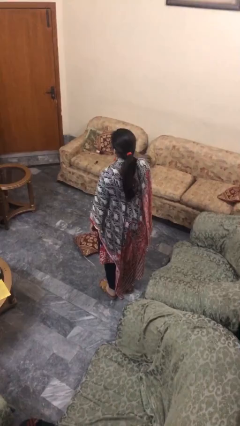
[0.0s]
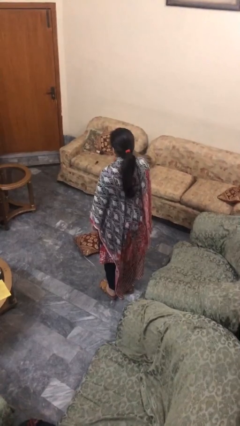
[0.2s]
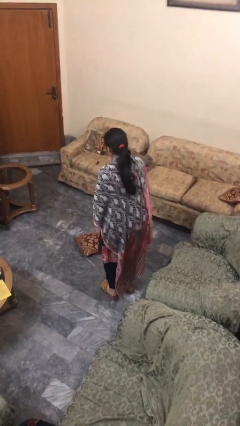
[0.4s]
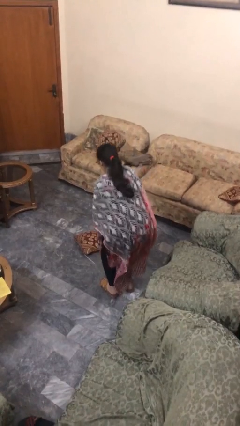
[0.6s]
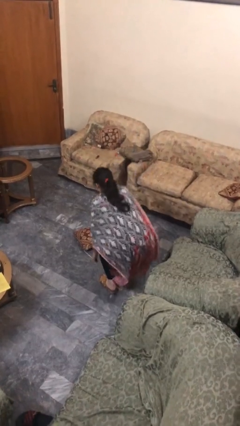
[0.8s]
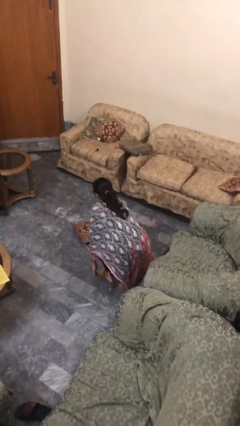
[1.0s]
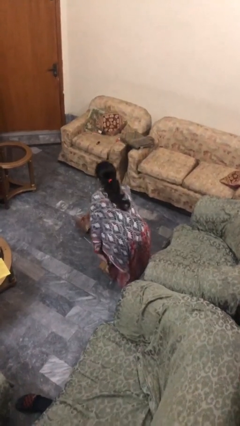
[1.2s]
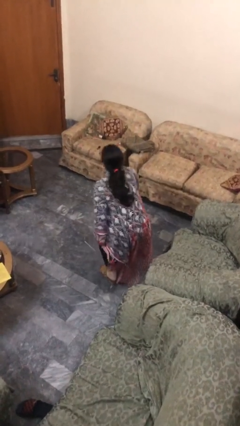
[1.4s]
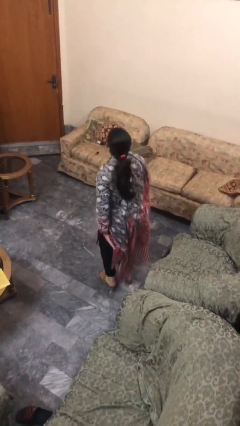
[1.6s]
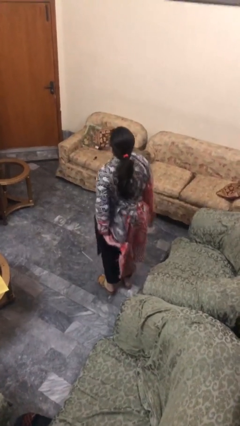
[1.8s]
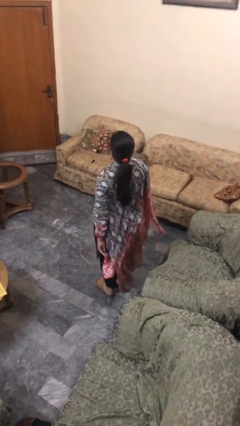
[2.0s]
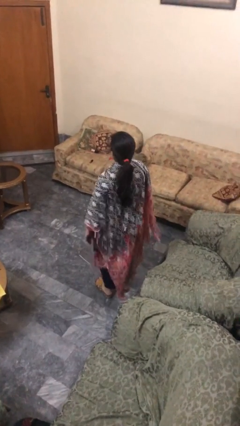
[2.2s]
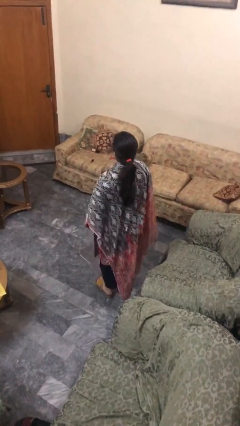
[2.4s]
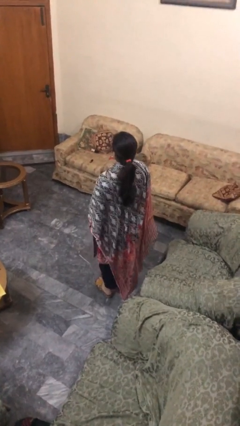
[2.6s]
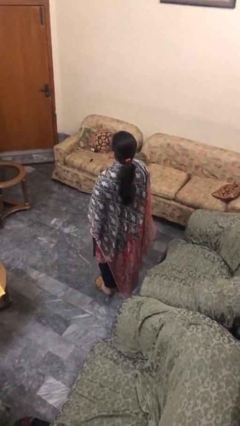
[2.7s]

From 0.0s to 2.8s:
person picks up object from floor

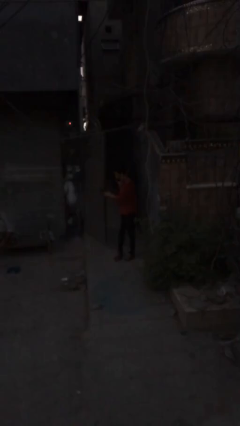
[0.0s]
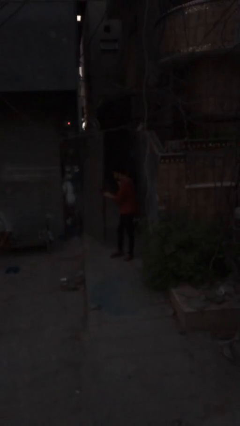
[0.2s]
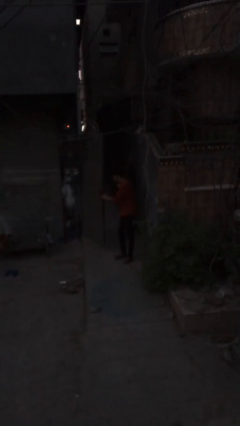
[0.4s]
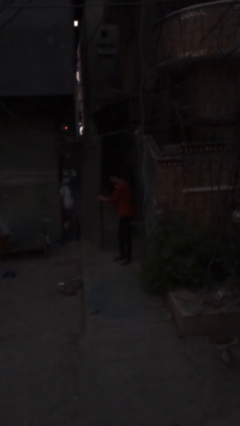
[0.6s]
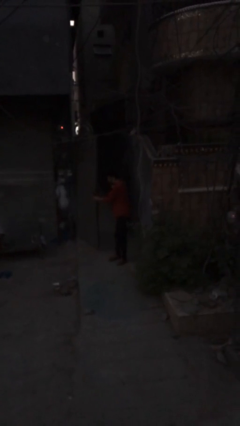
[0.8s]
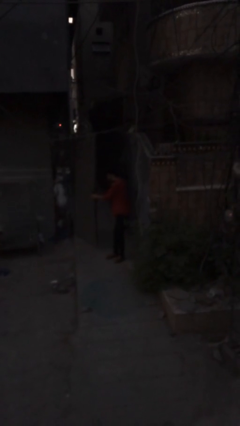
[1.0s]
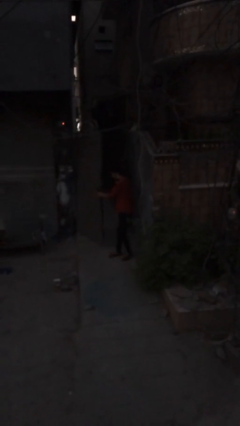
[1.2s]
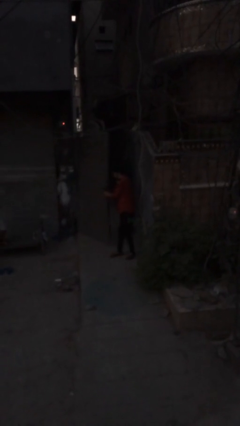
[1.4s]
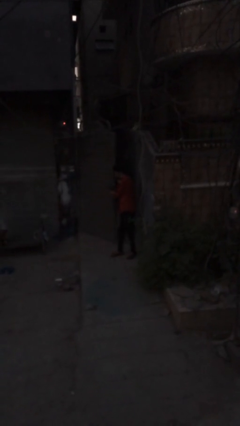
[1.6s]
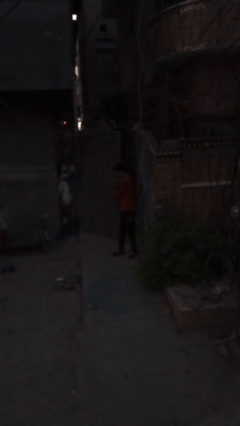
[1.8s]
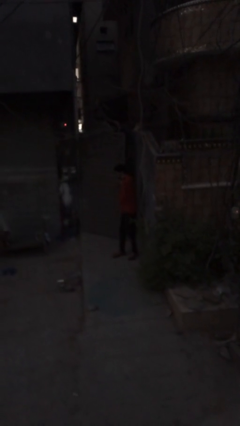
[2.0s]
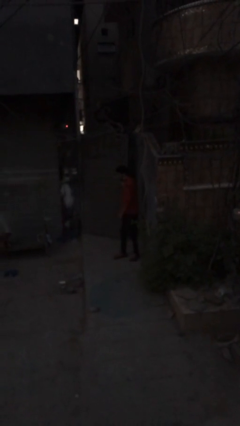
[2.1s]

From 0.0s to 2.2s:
person closes facility door

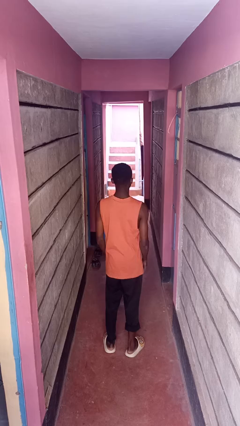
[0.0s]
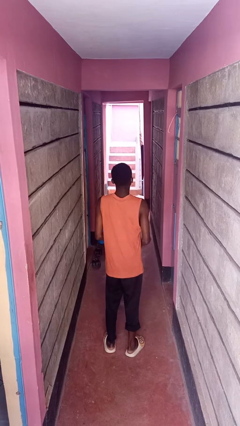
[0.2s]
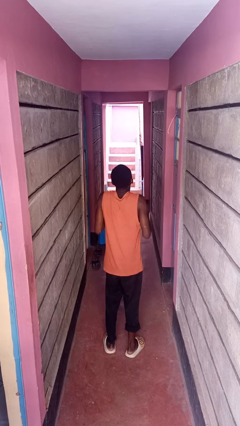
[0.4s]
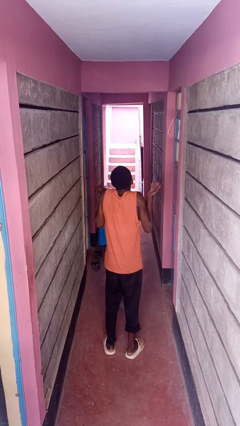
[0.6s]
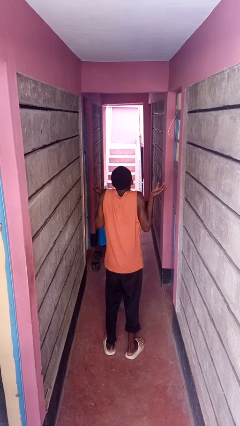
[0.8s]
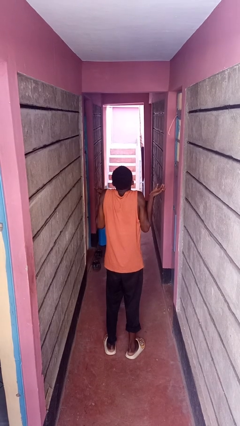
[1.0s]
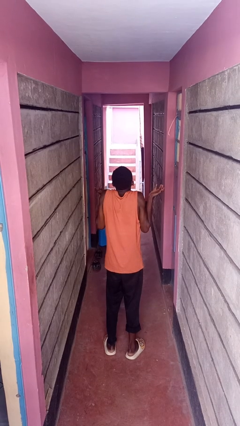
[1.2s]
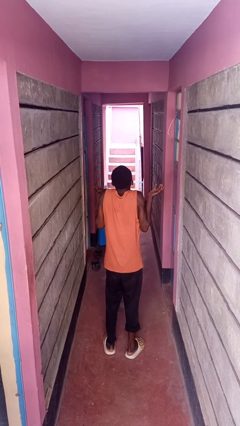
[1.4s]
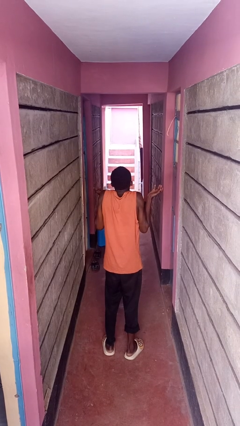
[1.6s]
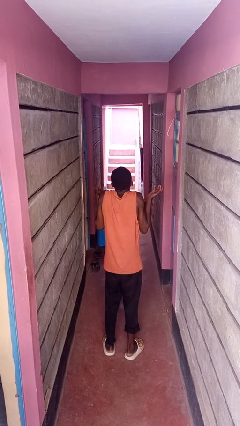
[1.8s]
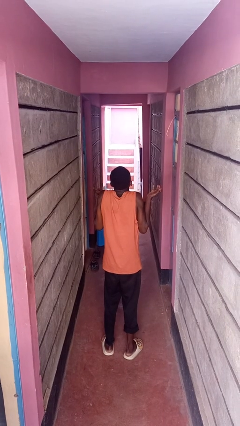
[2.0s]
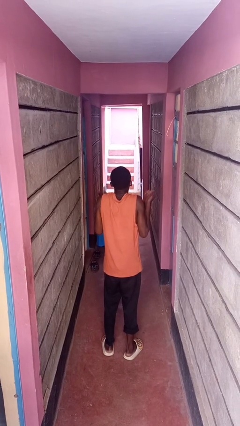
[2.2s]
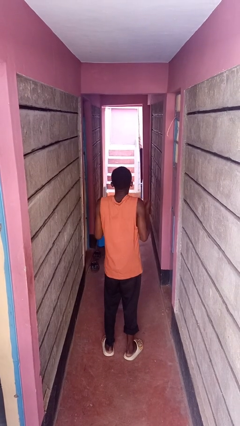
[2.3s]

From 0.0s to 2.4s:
person shrugs

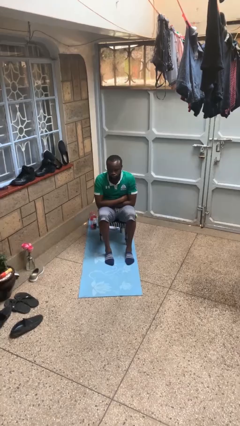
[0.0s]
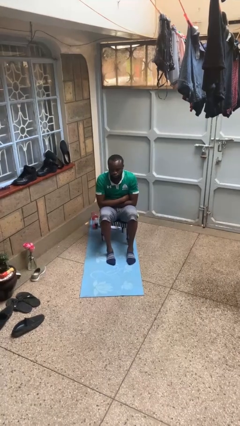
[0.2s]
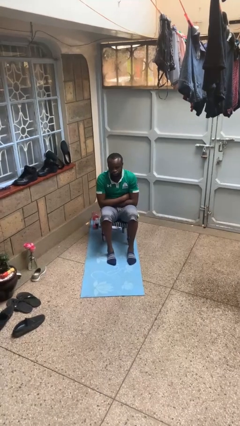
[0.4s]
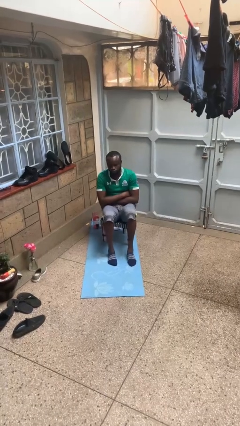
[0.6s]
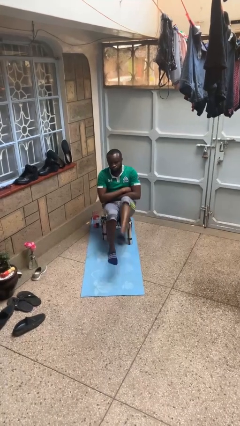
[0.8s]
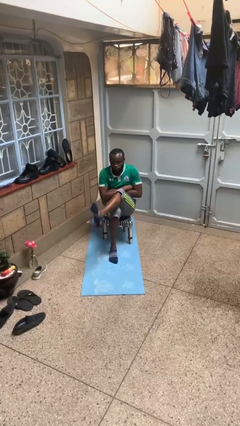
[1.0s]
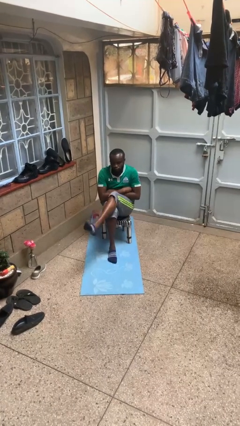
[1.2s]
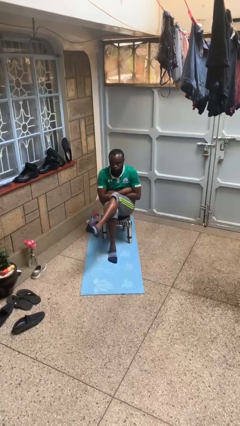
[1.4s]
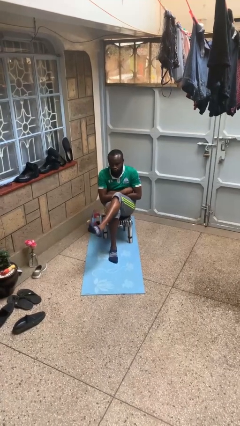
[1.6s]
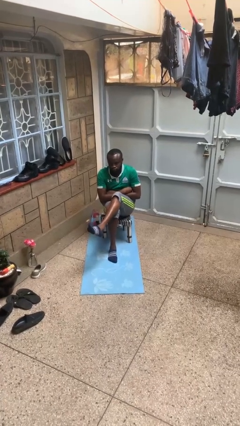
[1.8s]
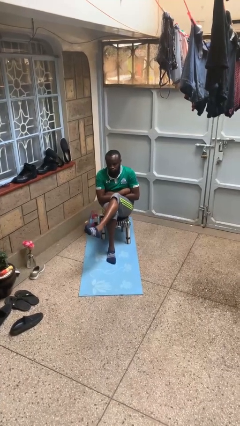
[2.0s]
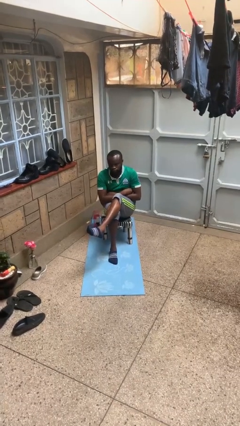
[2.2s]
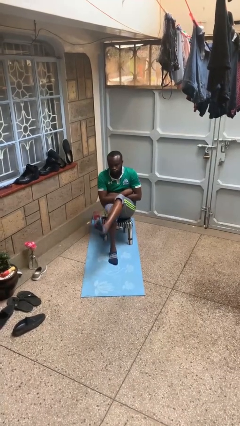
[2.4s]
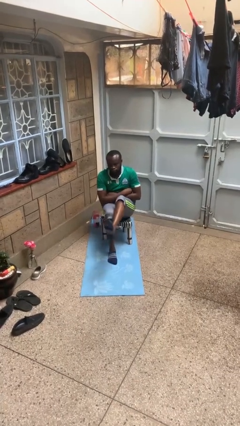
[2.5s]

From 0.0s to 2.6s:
person crosses legs

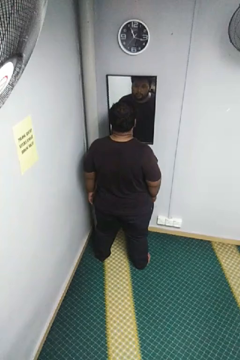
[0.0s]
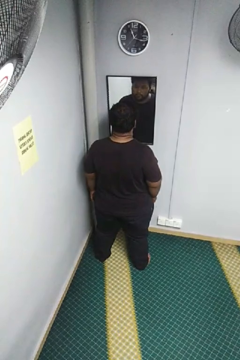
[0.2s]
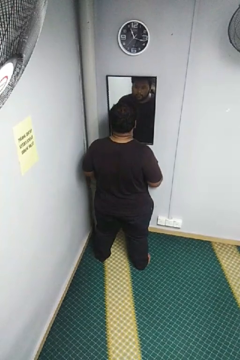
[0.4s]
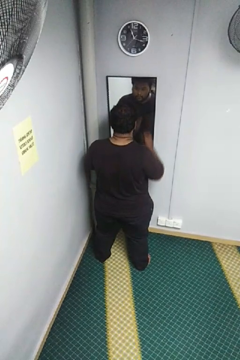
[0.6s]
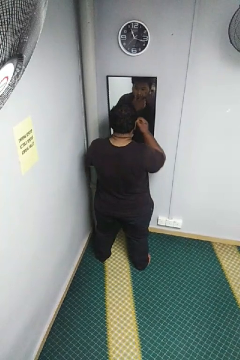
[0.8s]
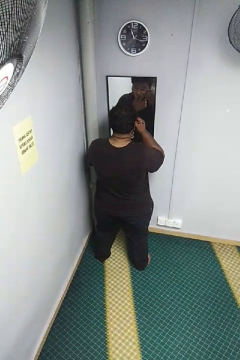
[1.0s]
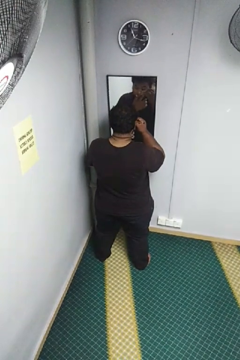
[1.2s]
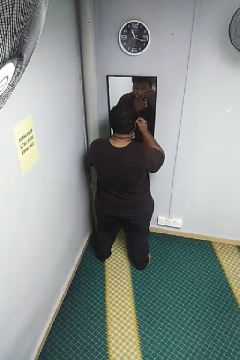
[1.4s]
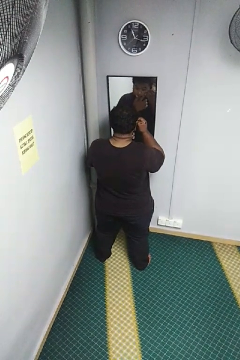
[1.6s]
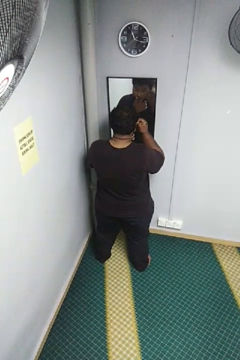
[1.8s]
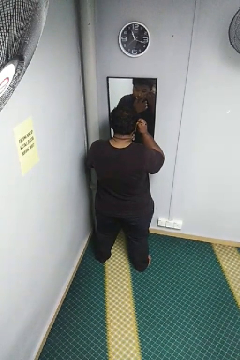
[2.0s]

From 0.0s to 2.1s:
person applies eye makeup

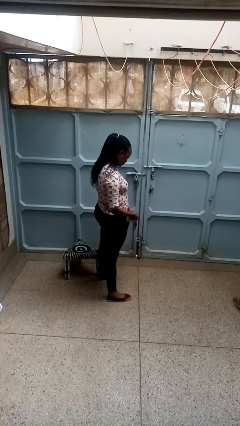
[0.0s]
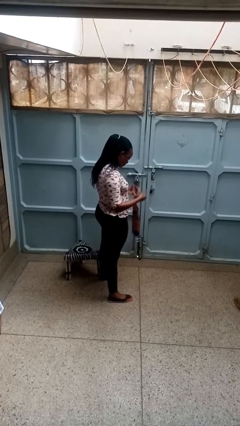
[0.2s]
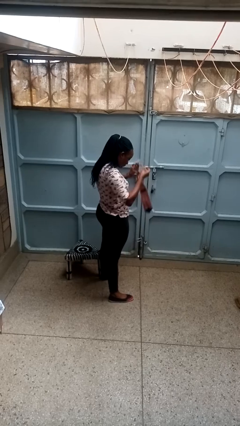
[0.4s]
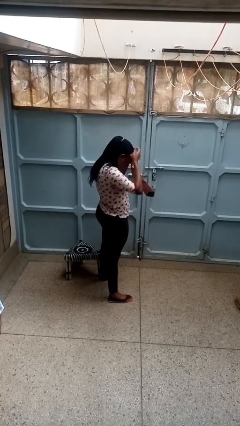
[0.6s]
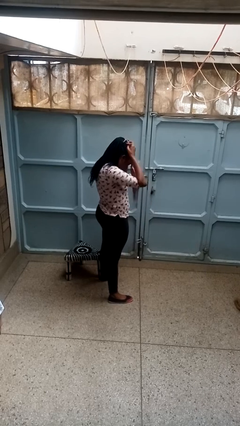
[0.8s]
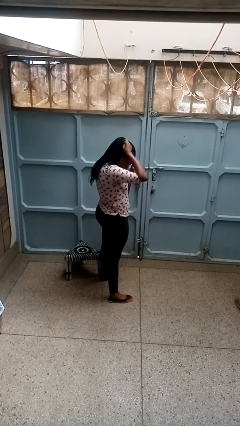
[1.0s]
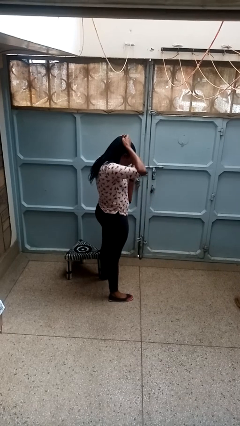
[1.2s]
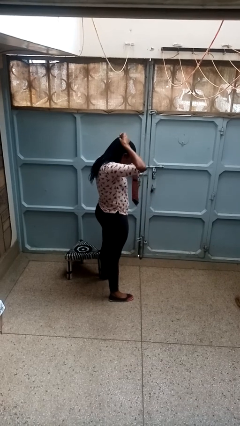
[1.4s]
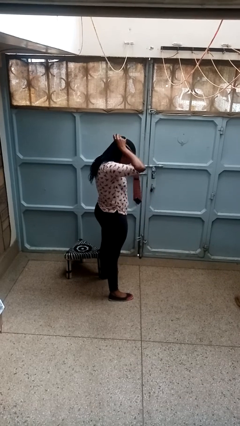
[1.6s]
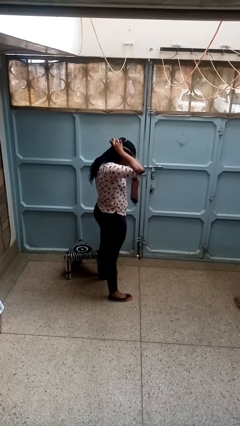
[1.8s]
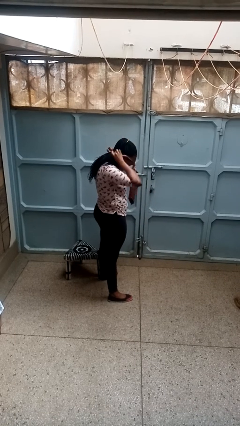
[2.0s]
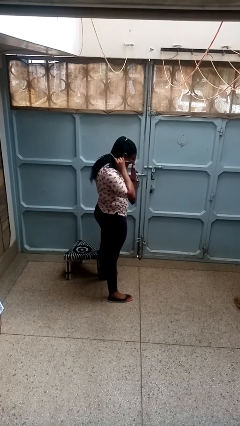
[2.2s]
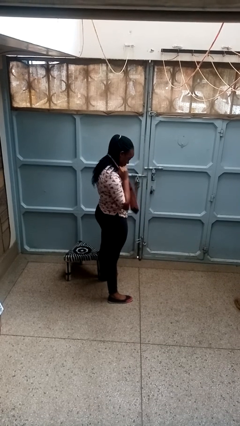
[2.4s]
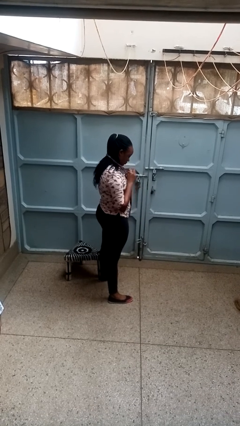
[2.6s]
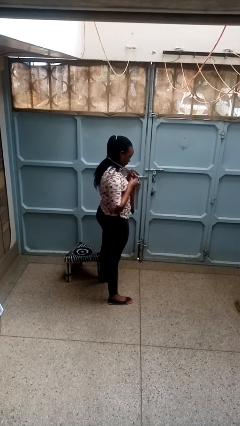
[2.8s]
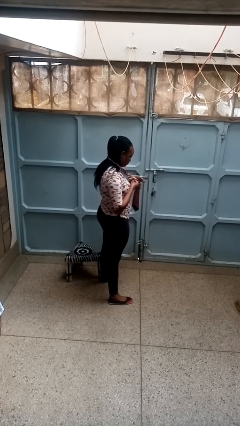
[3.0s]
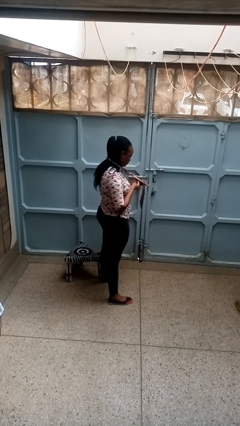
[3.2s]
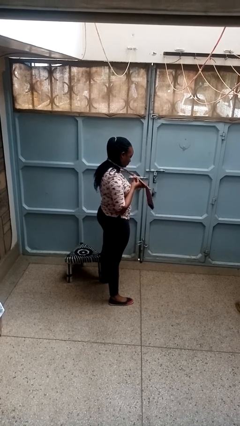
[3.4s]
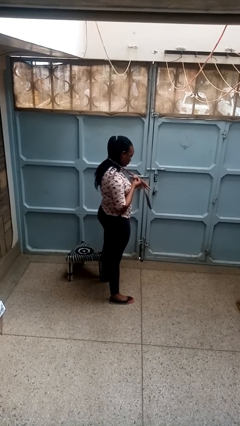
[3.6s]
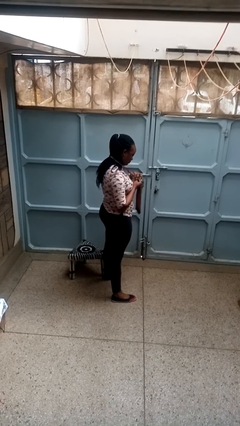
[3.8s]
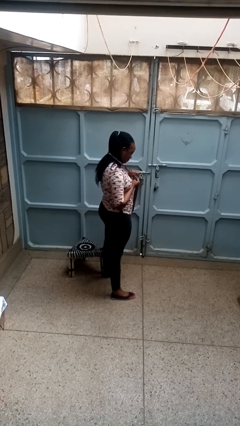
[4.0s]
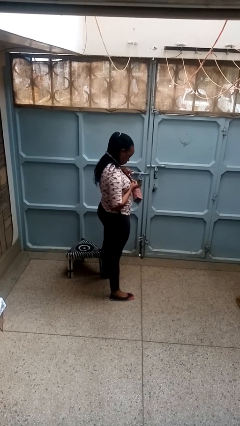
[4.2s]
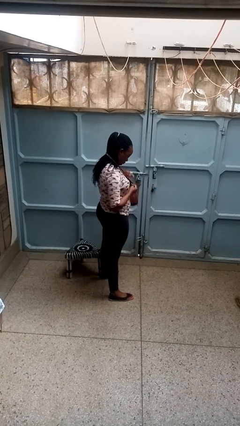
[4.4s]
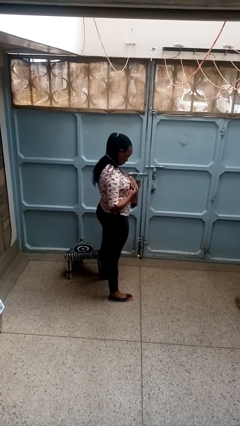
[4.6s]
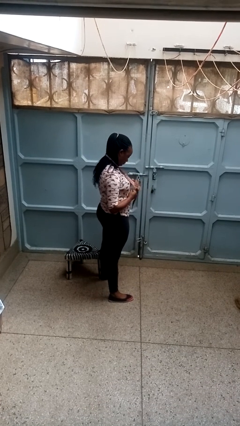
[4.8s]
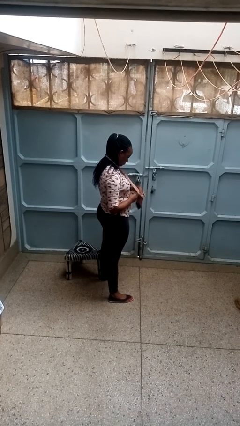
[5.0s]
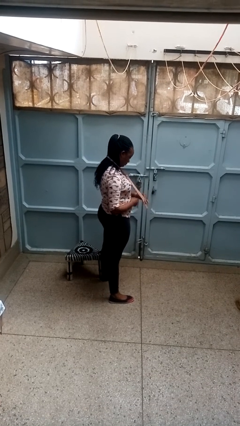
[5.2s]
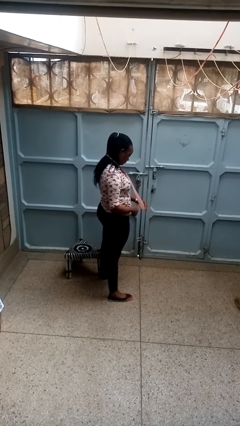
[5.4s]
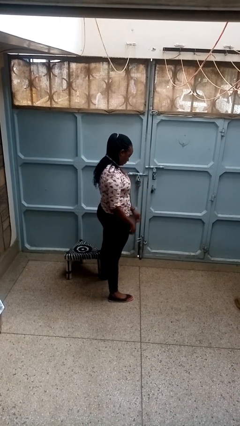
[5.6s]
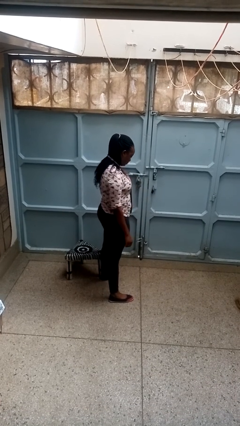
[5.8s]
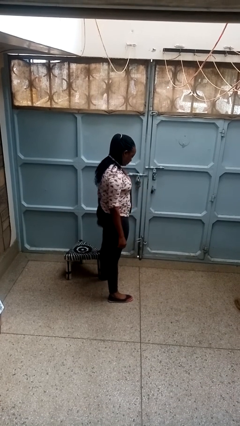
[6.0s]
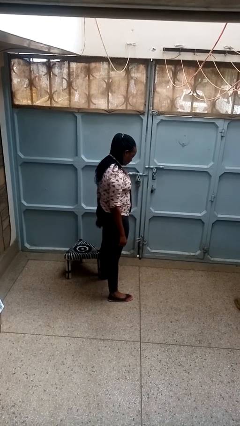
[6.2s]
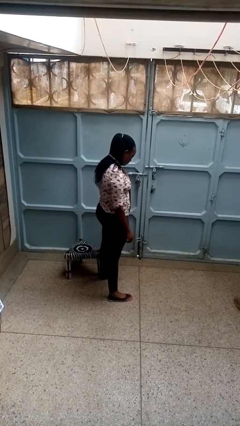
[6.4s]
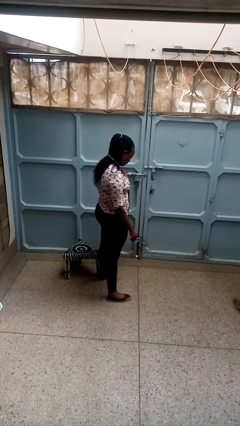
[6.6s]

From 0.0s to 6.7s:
person puts on necktie
